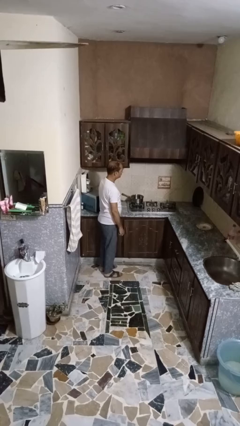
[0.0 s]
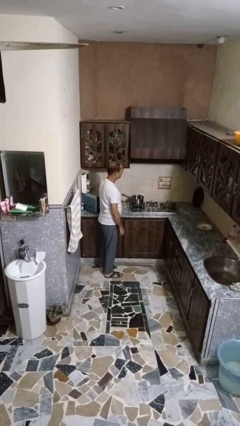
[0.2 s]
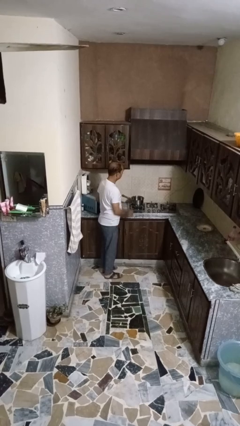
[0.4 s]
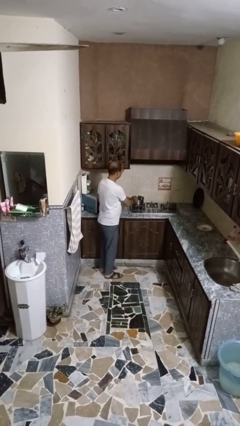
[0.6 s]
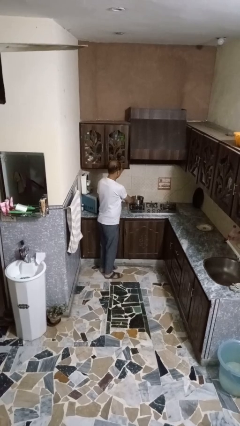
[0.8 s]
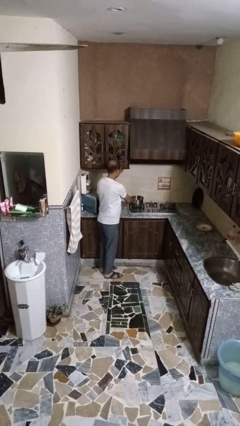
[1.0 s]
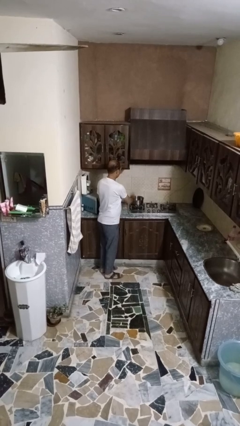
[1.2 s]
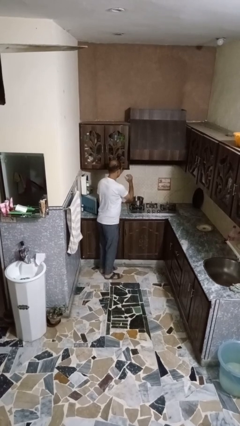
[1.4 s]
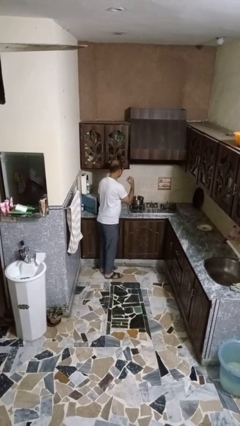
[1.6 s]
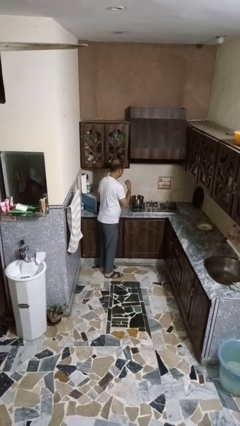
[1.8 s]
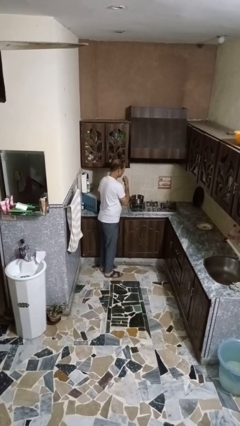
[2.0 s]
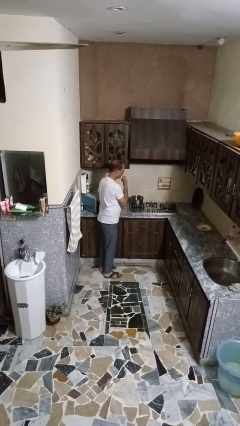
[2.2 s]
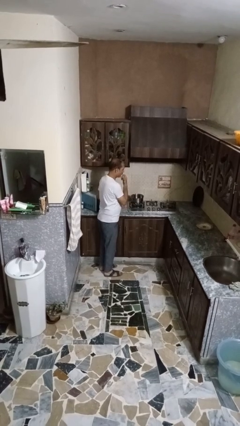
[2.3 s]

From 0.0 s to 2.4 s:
person burns hand

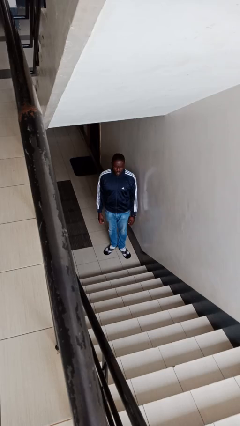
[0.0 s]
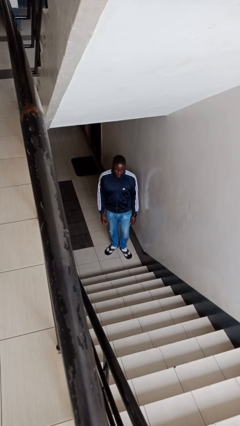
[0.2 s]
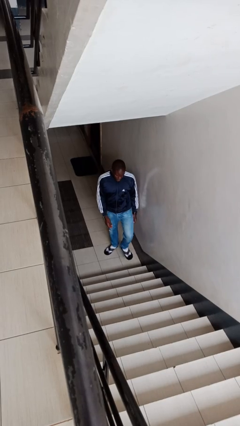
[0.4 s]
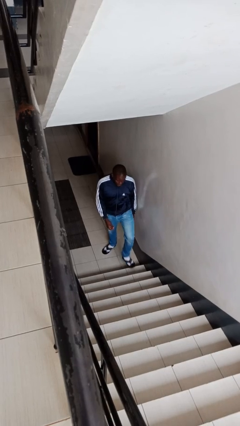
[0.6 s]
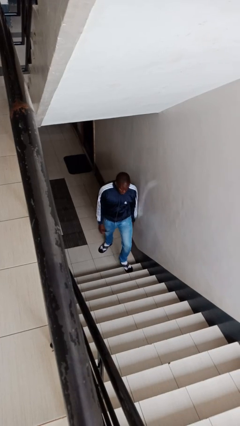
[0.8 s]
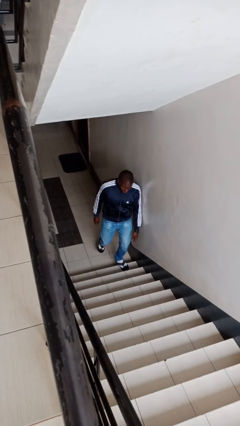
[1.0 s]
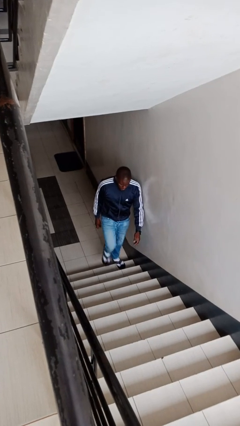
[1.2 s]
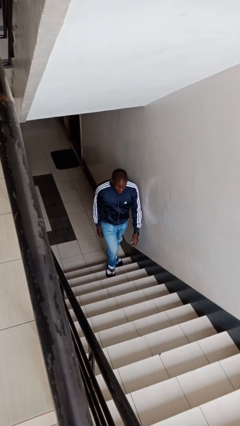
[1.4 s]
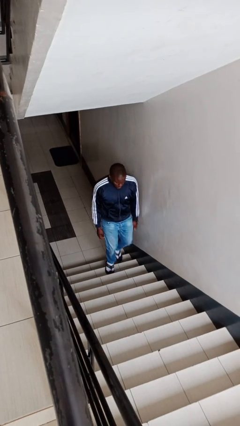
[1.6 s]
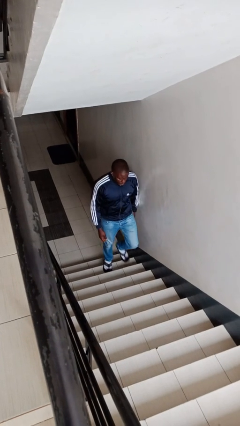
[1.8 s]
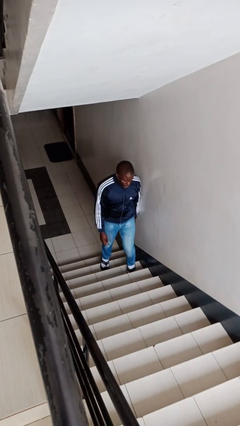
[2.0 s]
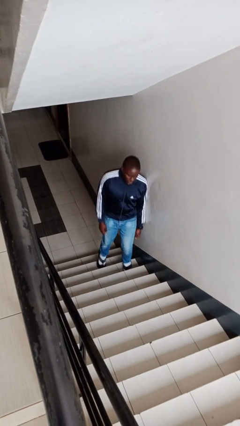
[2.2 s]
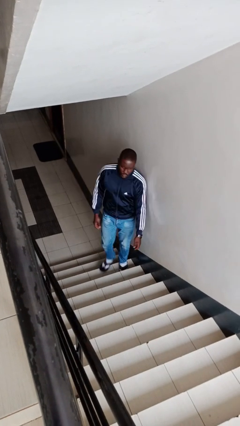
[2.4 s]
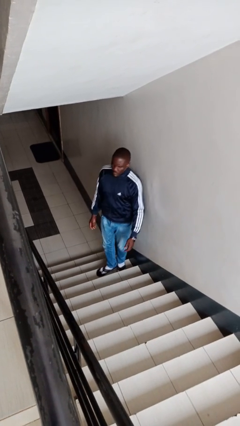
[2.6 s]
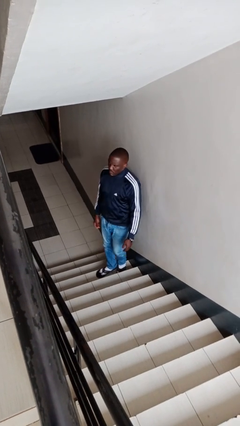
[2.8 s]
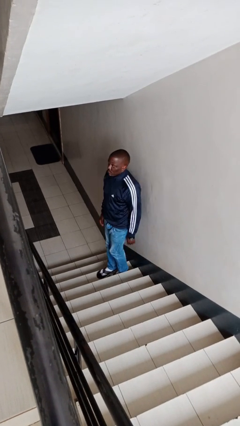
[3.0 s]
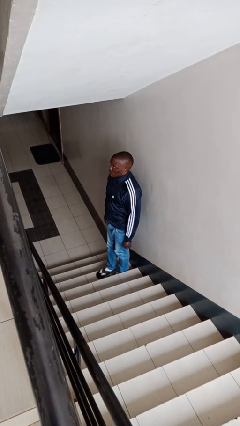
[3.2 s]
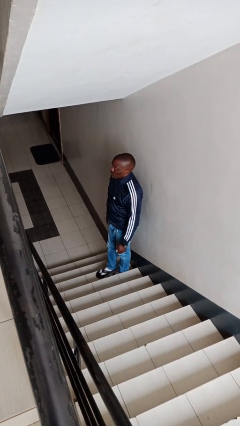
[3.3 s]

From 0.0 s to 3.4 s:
person climbs up stairs

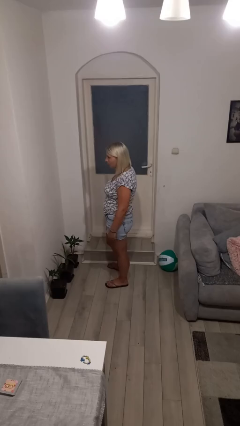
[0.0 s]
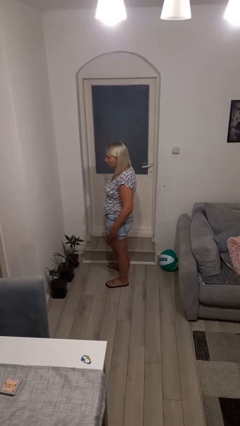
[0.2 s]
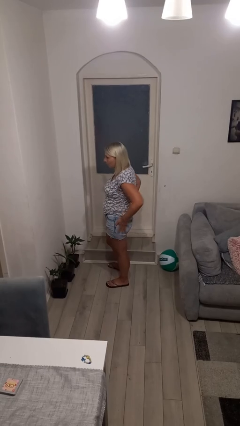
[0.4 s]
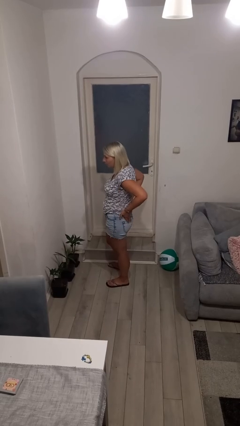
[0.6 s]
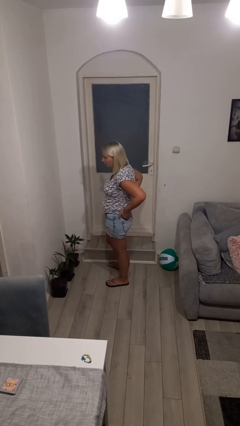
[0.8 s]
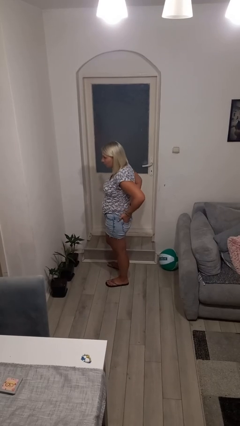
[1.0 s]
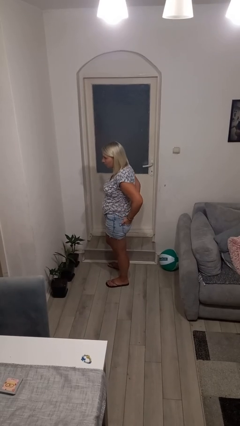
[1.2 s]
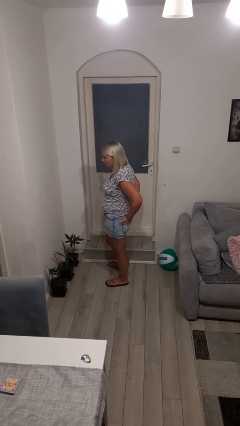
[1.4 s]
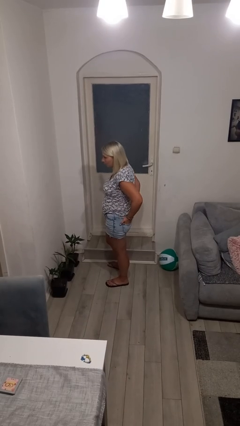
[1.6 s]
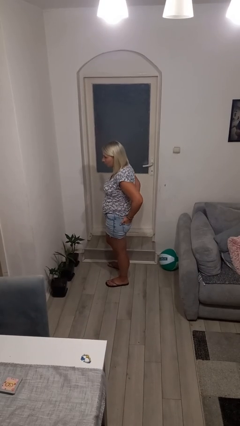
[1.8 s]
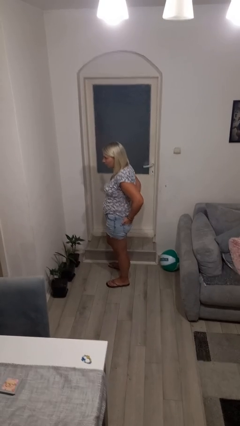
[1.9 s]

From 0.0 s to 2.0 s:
person puts hands in back pockets

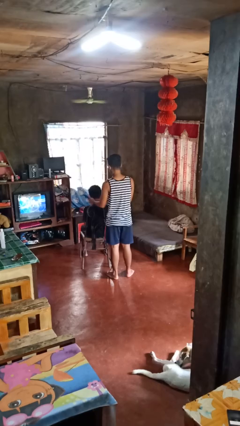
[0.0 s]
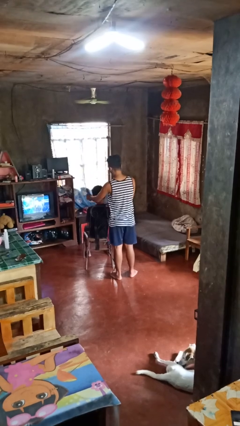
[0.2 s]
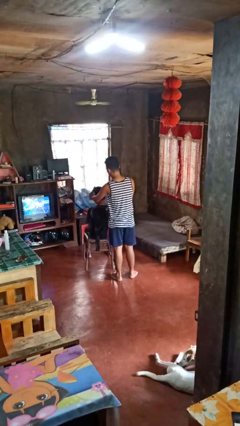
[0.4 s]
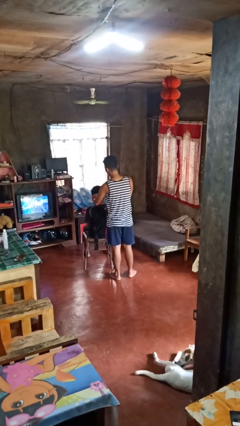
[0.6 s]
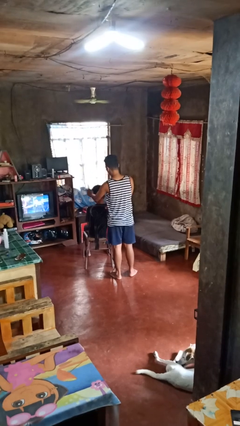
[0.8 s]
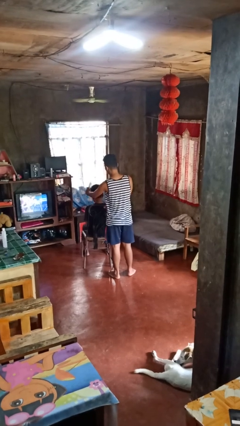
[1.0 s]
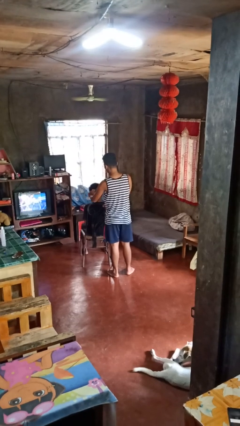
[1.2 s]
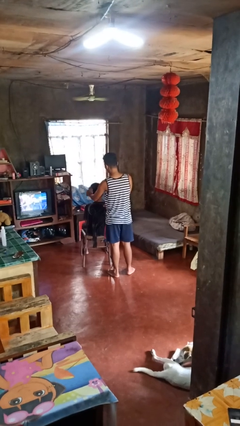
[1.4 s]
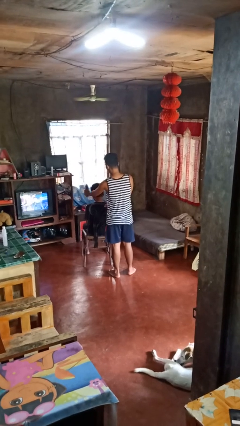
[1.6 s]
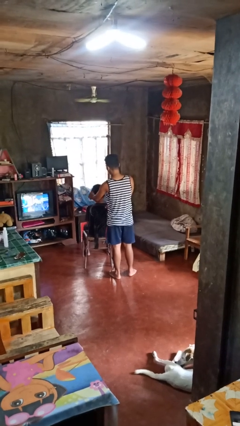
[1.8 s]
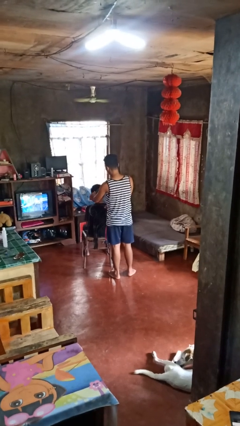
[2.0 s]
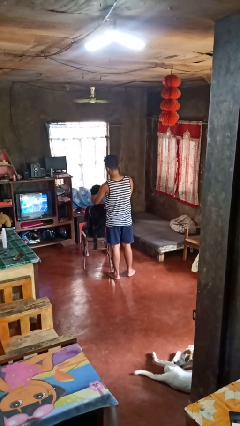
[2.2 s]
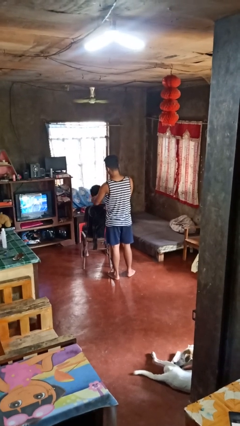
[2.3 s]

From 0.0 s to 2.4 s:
person brushes hair of person

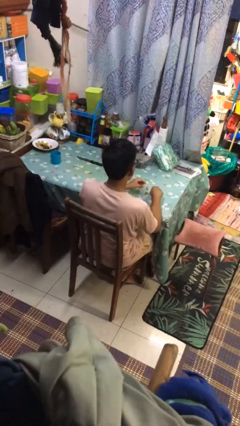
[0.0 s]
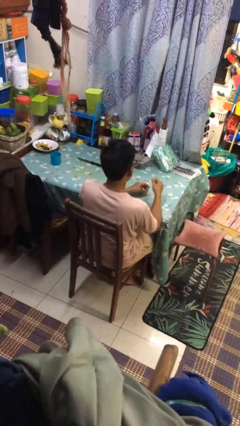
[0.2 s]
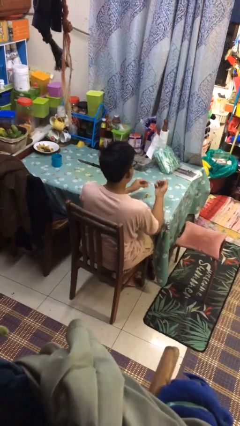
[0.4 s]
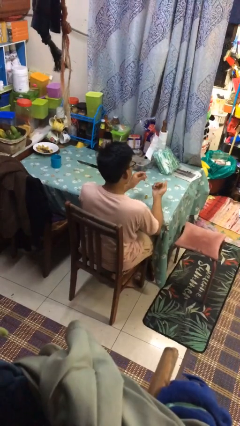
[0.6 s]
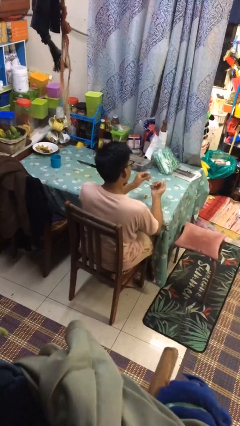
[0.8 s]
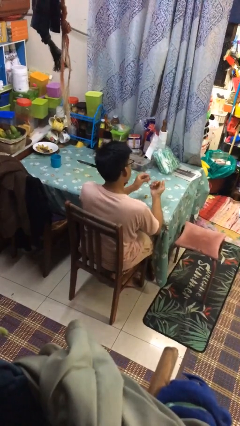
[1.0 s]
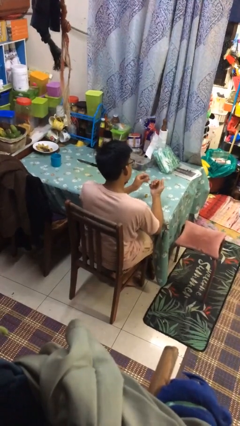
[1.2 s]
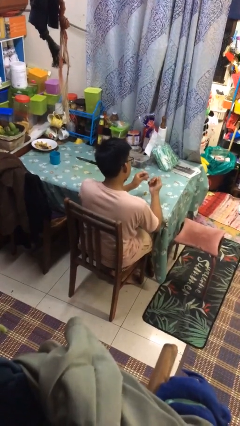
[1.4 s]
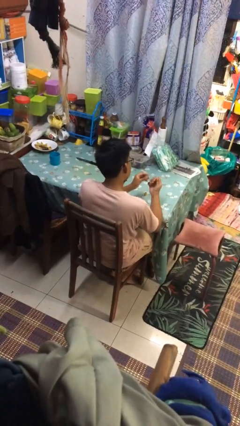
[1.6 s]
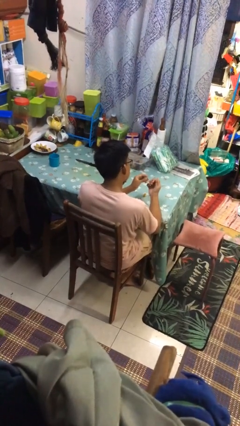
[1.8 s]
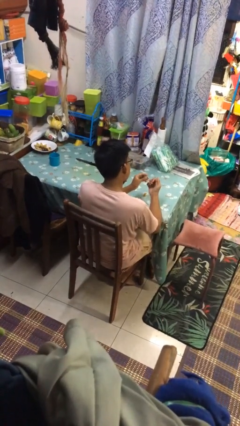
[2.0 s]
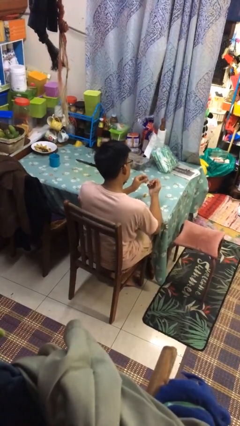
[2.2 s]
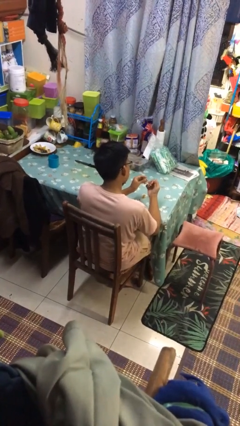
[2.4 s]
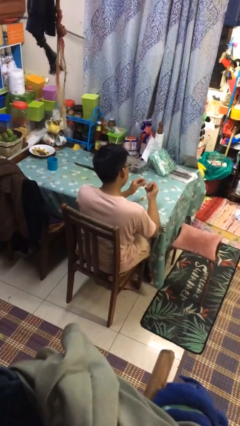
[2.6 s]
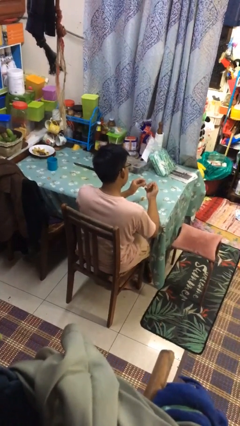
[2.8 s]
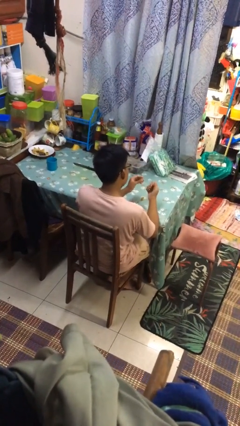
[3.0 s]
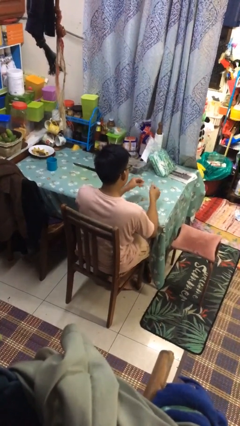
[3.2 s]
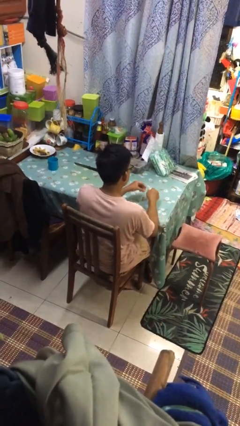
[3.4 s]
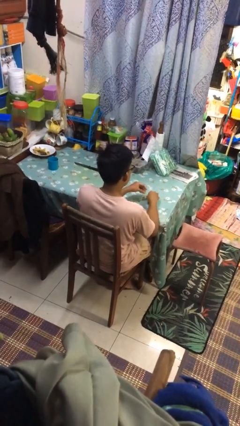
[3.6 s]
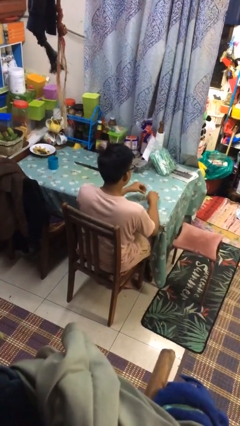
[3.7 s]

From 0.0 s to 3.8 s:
person paints fingernails

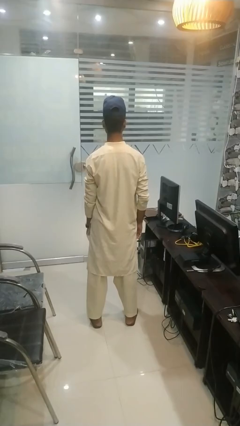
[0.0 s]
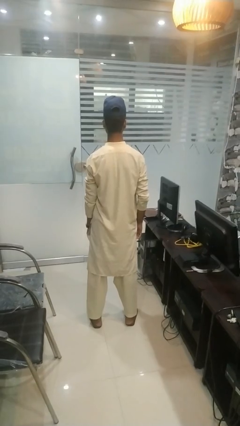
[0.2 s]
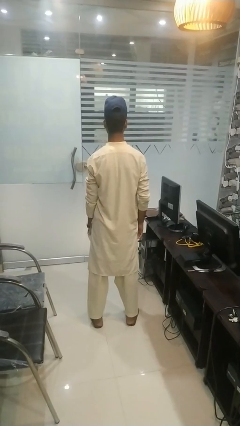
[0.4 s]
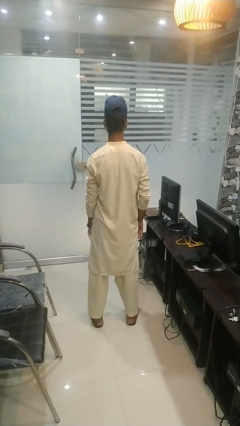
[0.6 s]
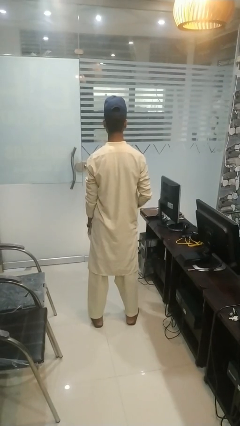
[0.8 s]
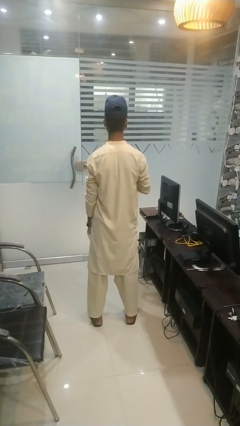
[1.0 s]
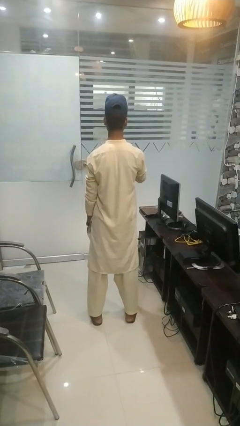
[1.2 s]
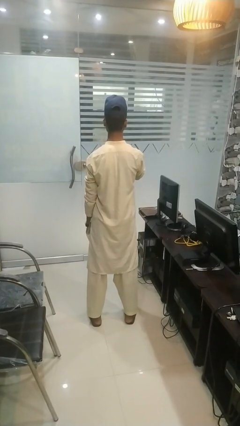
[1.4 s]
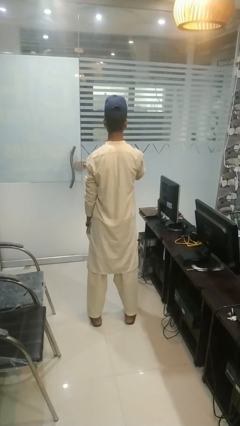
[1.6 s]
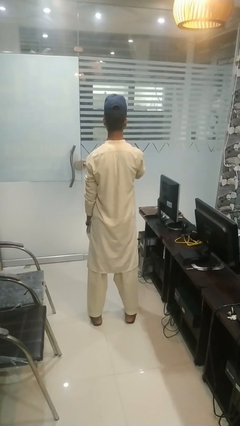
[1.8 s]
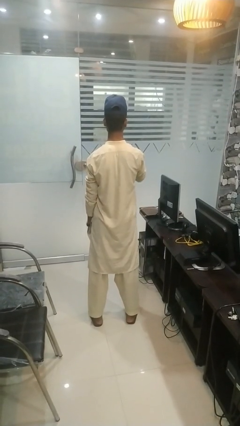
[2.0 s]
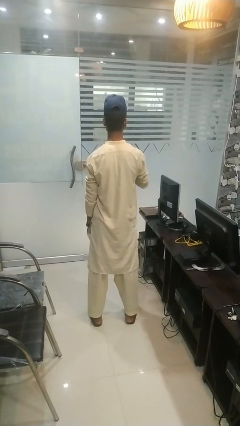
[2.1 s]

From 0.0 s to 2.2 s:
person gestures be quiet

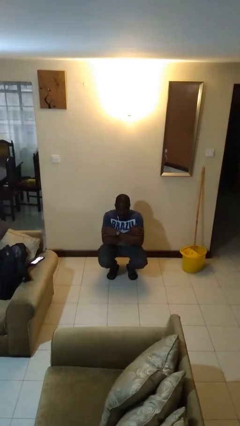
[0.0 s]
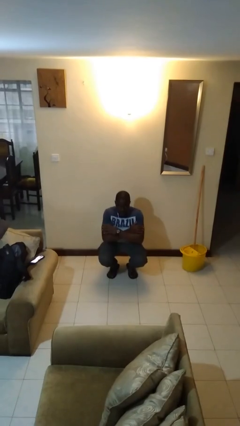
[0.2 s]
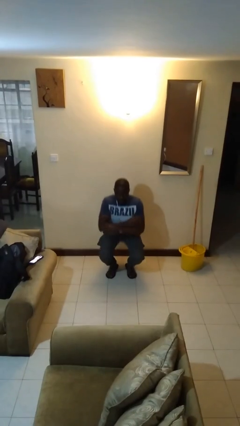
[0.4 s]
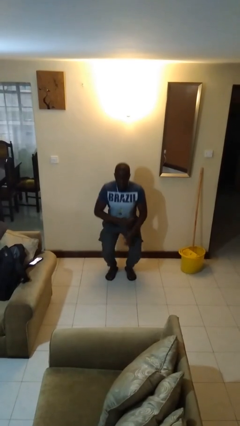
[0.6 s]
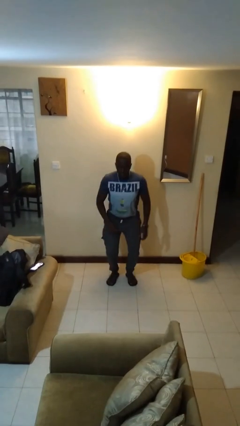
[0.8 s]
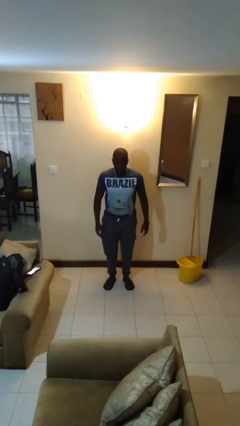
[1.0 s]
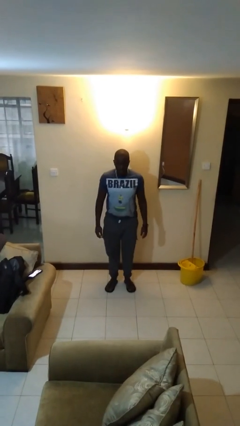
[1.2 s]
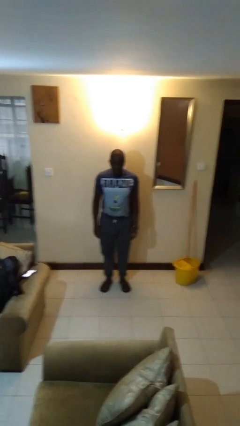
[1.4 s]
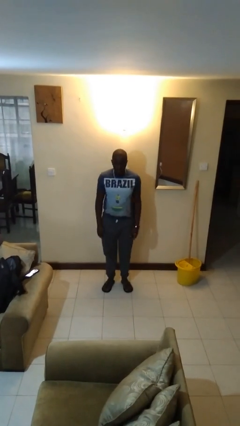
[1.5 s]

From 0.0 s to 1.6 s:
person stands up
